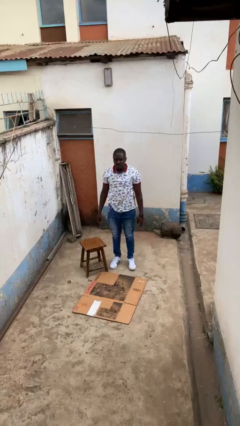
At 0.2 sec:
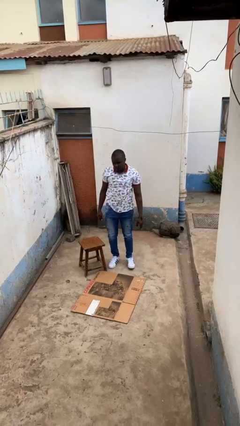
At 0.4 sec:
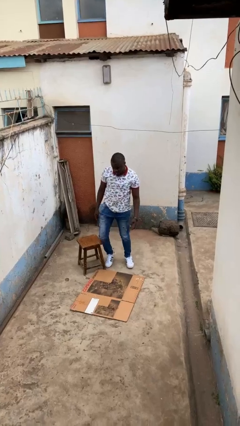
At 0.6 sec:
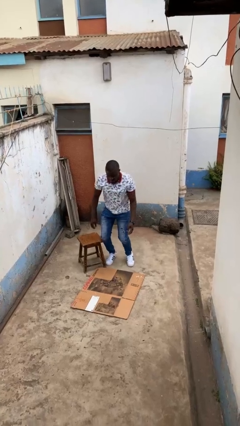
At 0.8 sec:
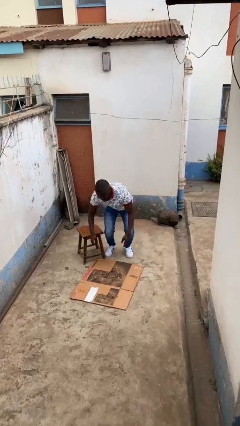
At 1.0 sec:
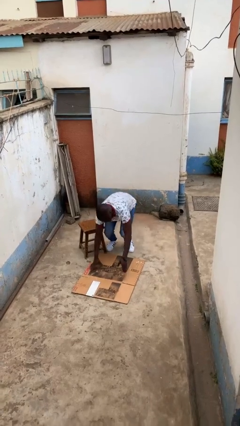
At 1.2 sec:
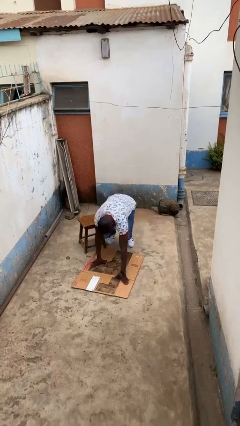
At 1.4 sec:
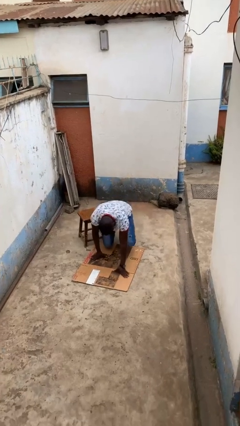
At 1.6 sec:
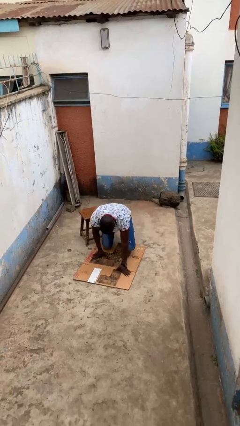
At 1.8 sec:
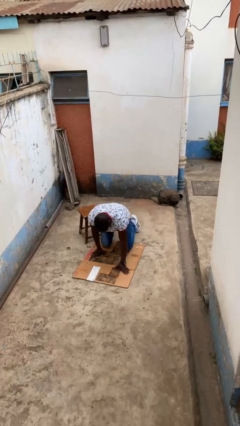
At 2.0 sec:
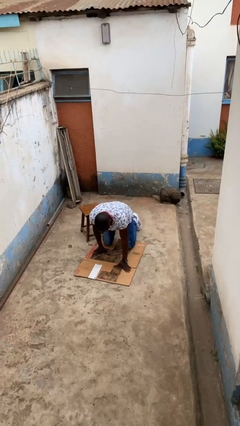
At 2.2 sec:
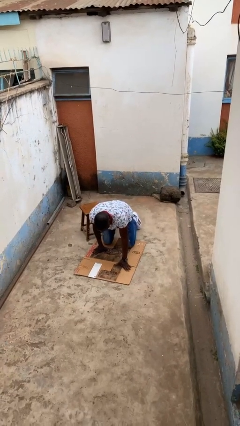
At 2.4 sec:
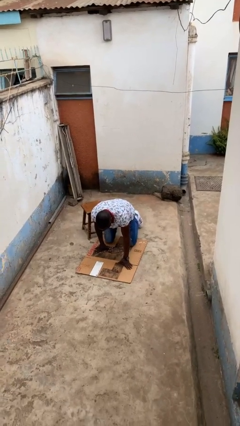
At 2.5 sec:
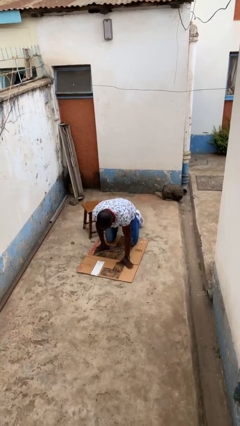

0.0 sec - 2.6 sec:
person trips on object on floor

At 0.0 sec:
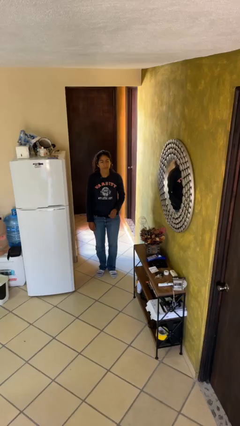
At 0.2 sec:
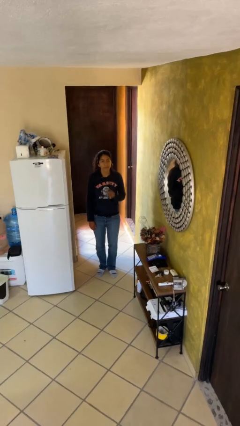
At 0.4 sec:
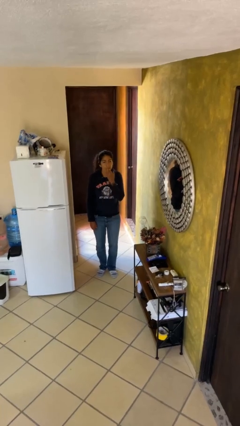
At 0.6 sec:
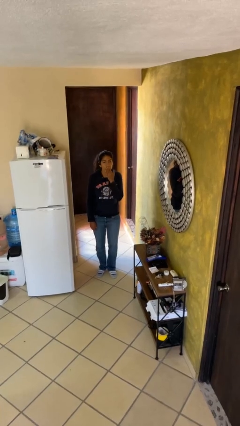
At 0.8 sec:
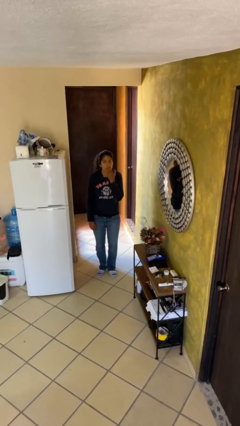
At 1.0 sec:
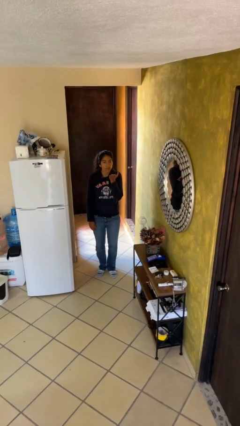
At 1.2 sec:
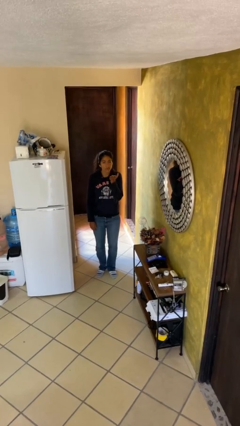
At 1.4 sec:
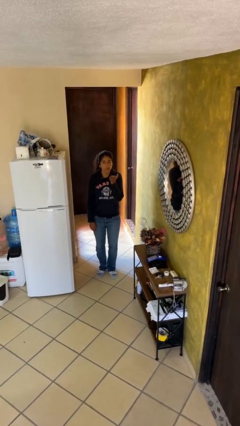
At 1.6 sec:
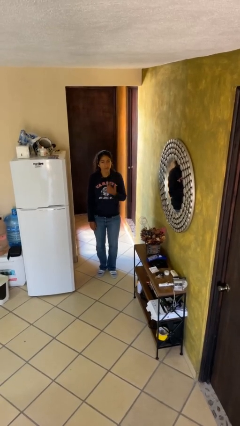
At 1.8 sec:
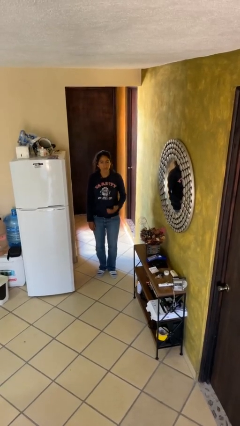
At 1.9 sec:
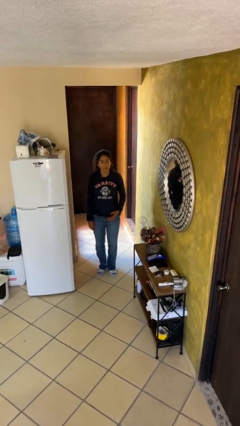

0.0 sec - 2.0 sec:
person gestures blow kiss

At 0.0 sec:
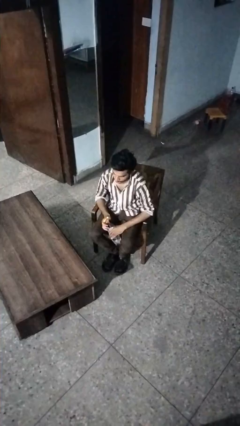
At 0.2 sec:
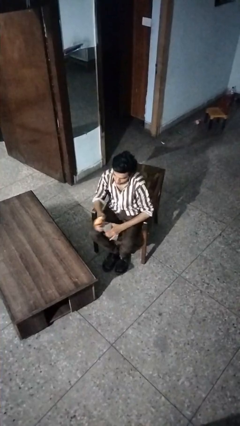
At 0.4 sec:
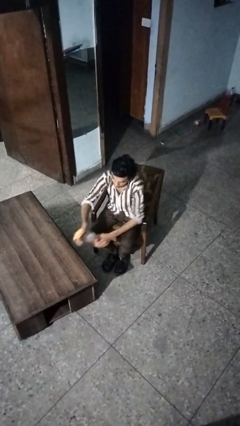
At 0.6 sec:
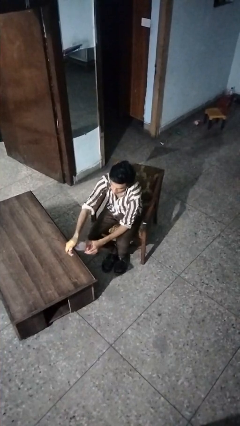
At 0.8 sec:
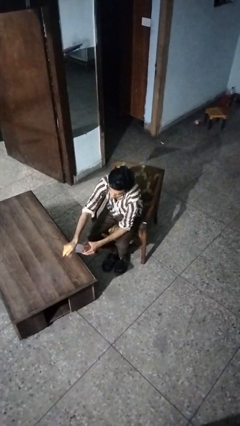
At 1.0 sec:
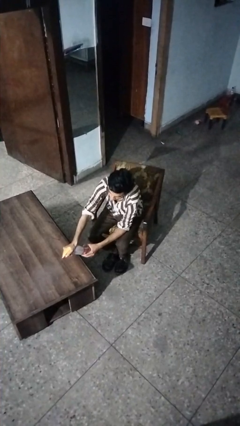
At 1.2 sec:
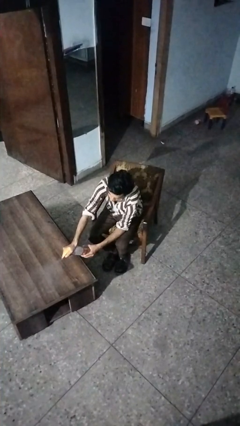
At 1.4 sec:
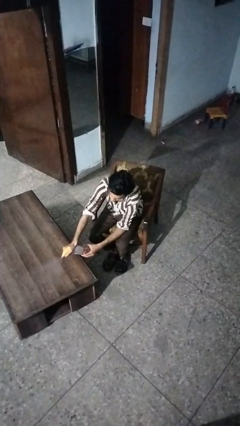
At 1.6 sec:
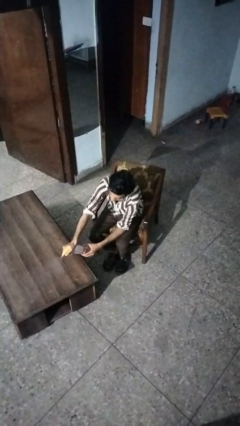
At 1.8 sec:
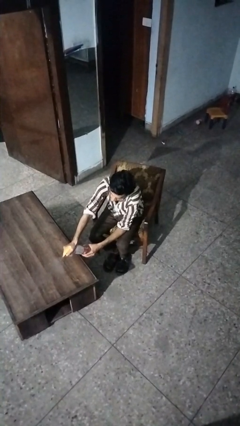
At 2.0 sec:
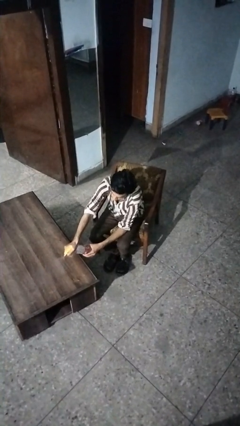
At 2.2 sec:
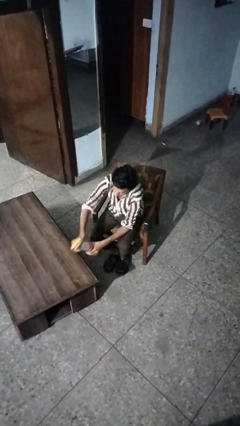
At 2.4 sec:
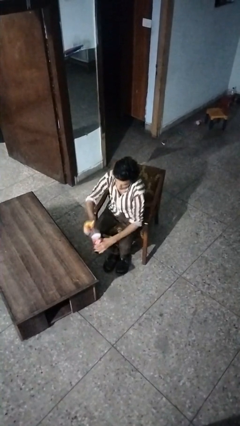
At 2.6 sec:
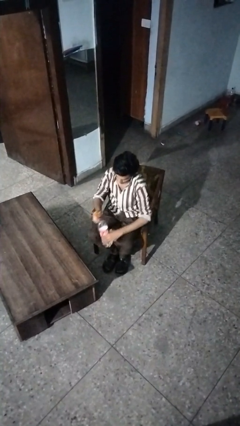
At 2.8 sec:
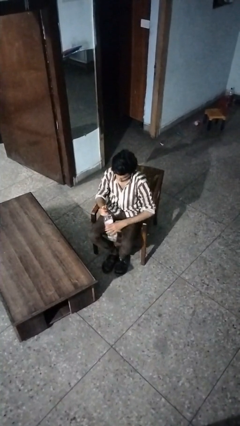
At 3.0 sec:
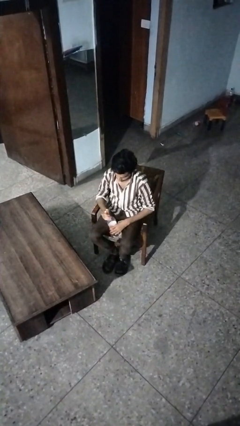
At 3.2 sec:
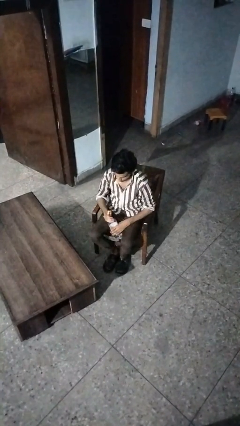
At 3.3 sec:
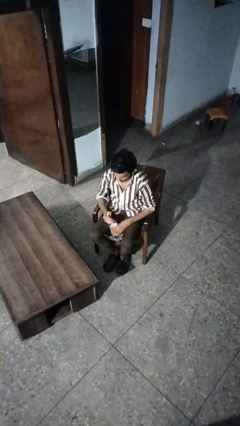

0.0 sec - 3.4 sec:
person sprays from bottle

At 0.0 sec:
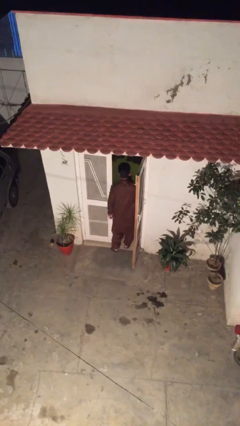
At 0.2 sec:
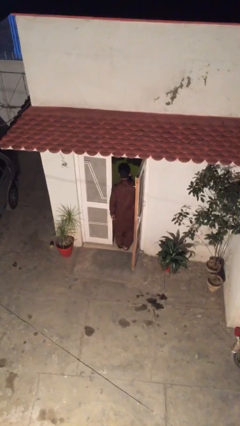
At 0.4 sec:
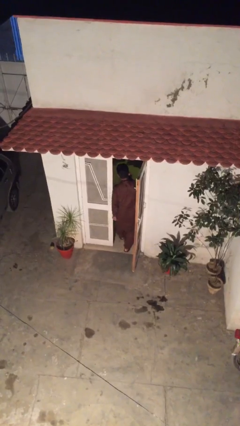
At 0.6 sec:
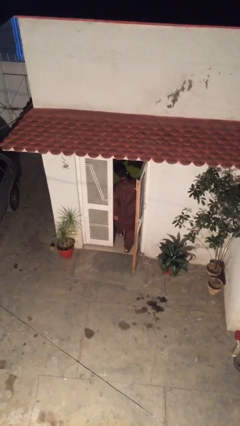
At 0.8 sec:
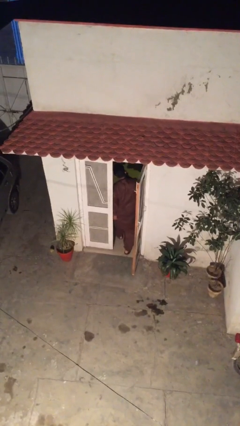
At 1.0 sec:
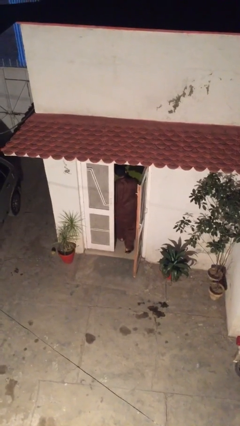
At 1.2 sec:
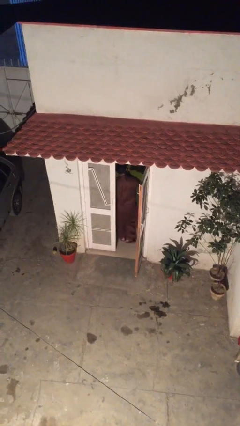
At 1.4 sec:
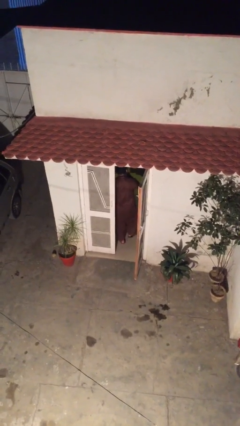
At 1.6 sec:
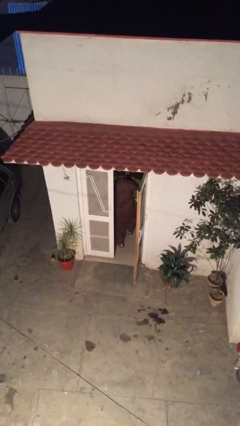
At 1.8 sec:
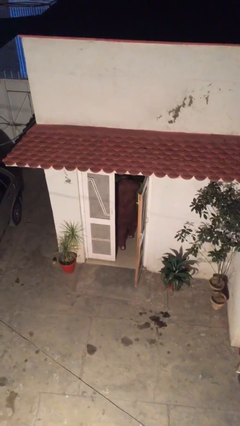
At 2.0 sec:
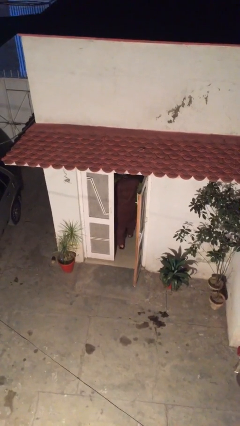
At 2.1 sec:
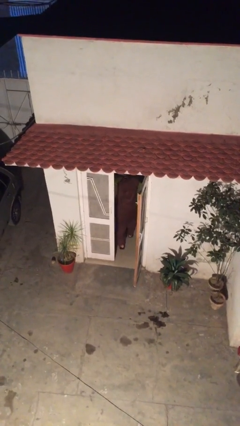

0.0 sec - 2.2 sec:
person exits scene through structure

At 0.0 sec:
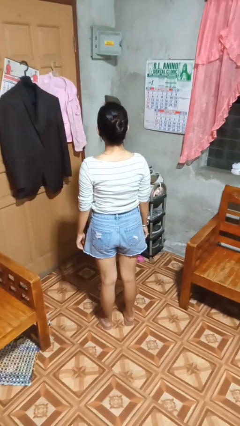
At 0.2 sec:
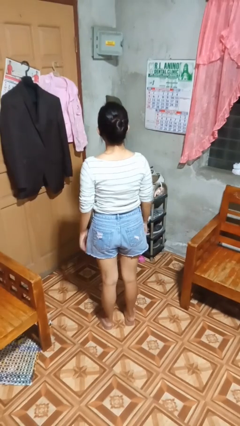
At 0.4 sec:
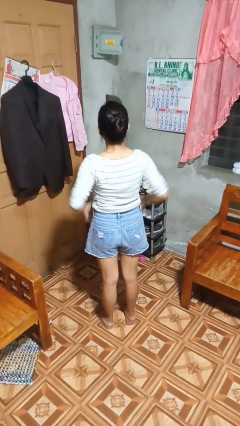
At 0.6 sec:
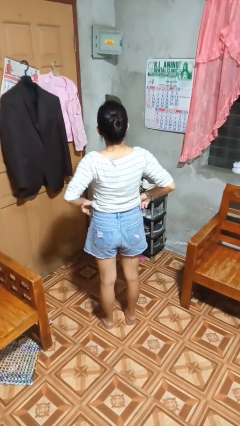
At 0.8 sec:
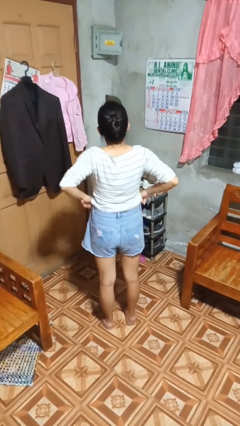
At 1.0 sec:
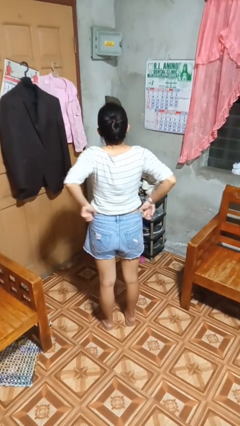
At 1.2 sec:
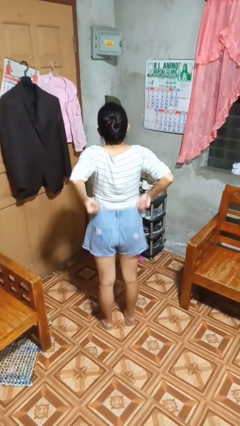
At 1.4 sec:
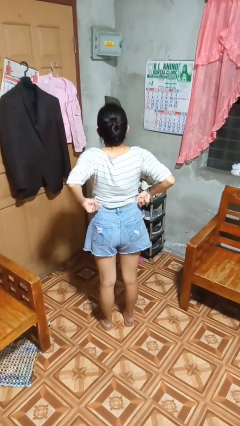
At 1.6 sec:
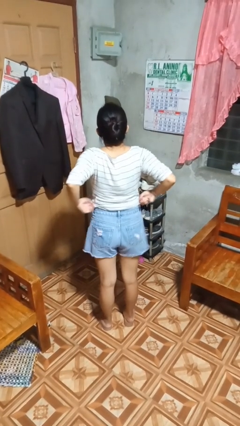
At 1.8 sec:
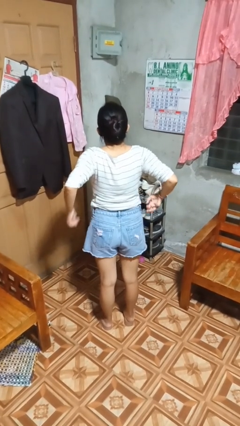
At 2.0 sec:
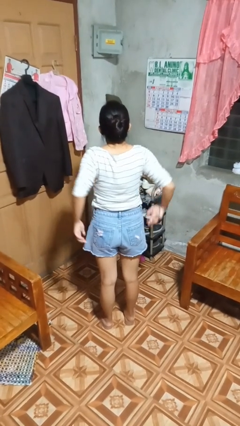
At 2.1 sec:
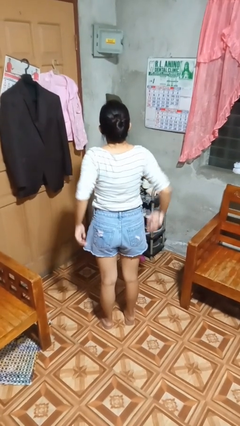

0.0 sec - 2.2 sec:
person hikes up pants

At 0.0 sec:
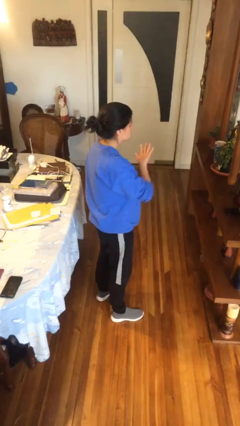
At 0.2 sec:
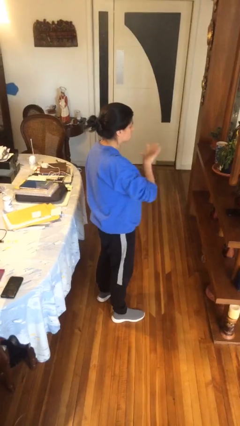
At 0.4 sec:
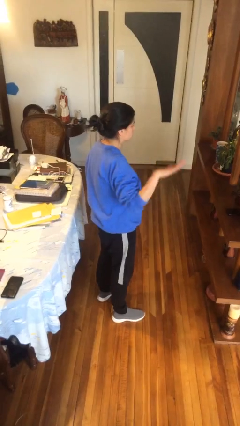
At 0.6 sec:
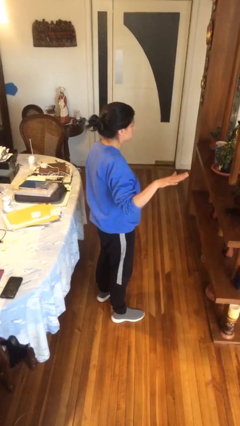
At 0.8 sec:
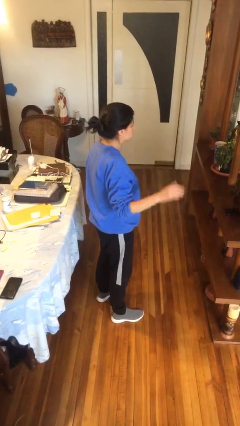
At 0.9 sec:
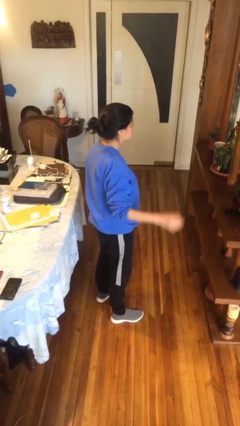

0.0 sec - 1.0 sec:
person gestures swipe right

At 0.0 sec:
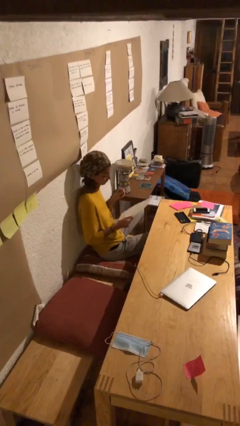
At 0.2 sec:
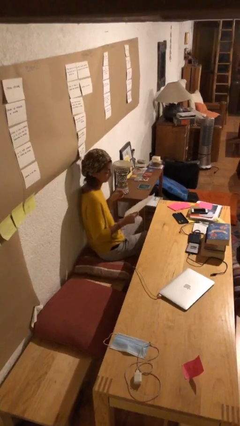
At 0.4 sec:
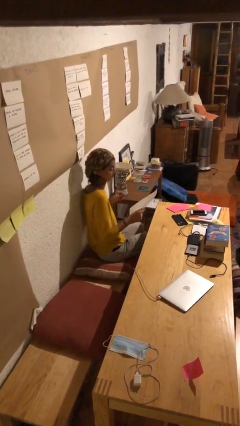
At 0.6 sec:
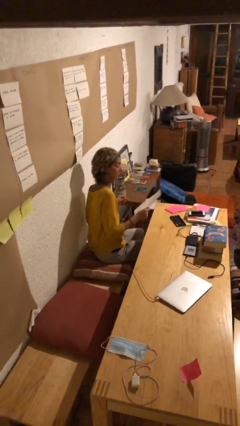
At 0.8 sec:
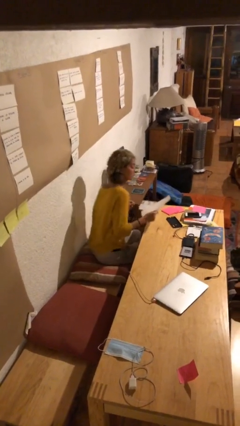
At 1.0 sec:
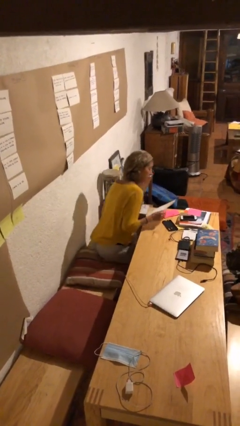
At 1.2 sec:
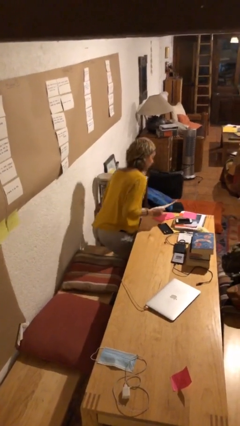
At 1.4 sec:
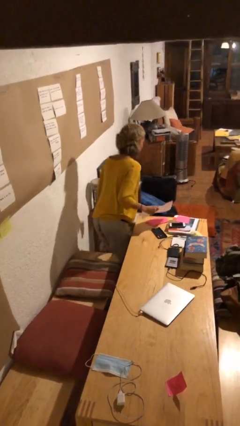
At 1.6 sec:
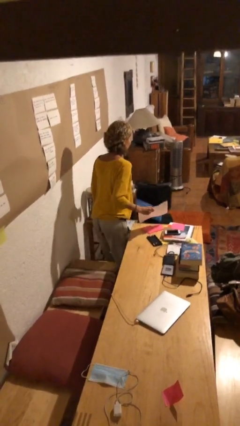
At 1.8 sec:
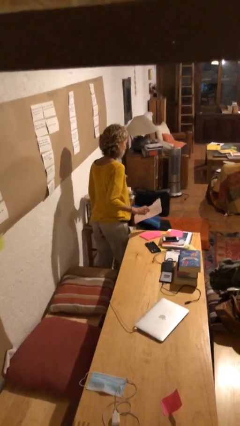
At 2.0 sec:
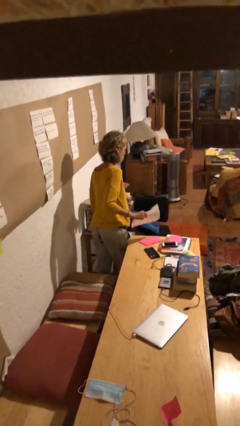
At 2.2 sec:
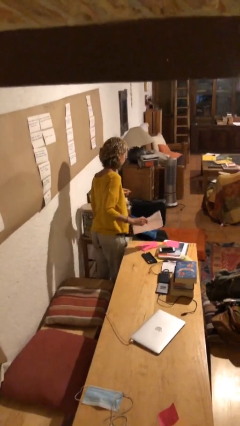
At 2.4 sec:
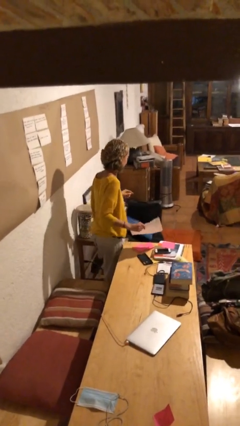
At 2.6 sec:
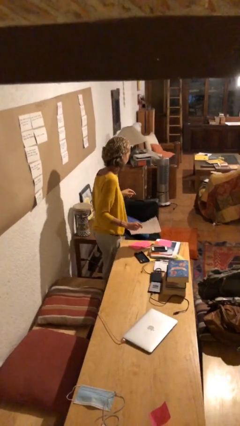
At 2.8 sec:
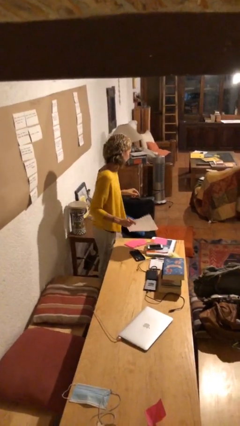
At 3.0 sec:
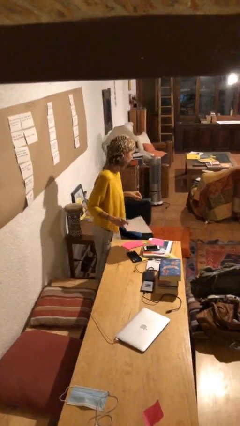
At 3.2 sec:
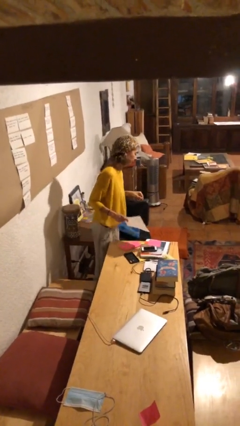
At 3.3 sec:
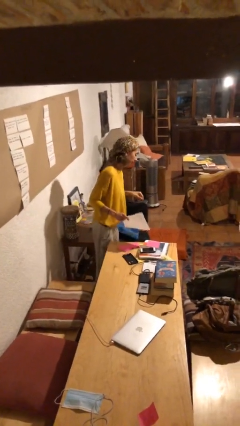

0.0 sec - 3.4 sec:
person stands up
